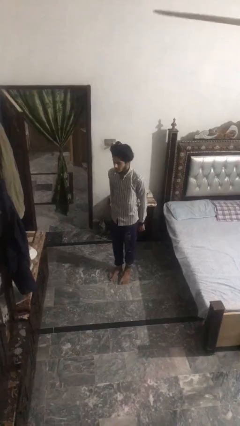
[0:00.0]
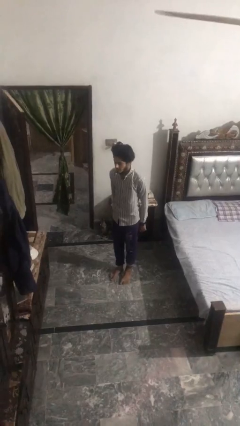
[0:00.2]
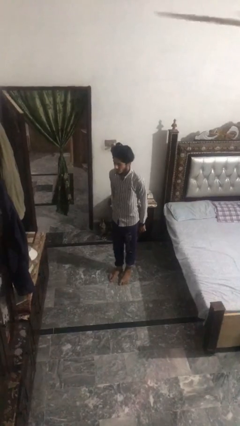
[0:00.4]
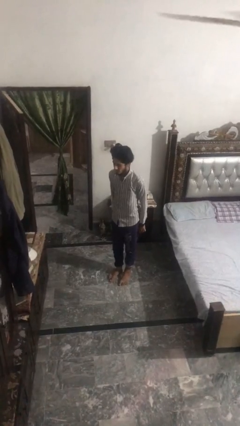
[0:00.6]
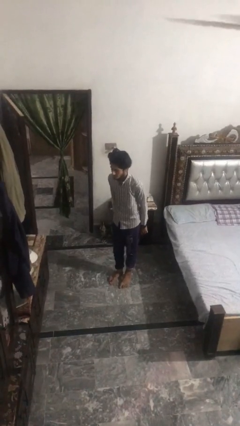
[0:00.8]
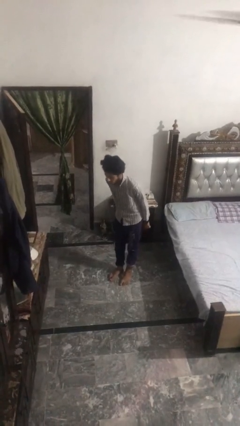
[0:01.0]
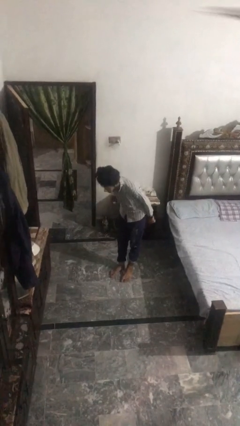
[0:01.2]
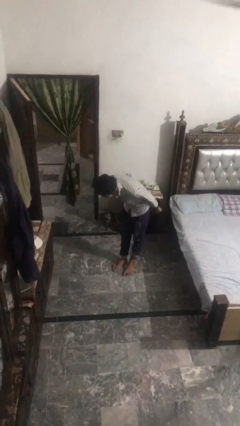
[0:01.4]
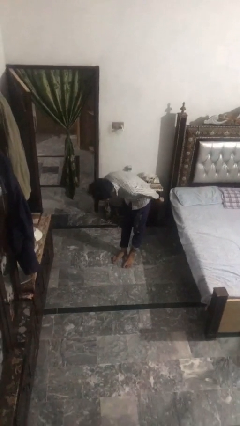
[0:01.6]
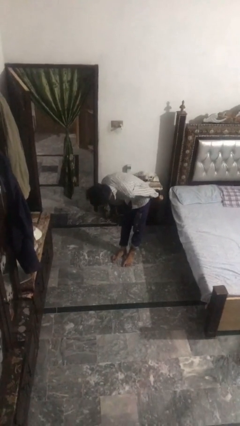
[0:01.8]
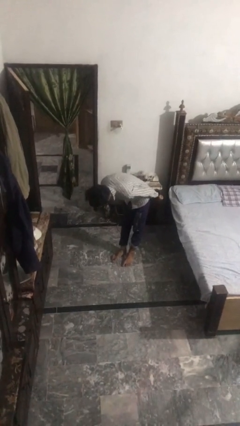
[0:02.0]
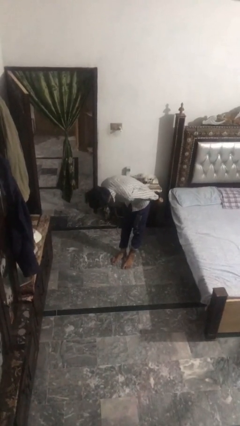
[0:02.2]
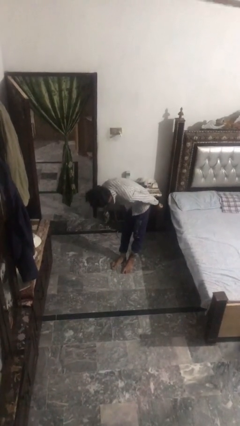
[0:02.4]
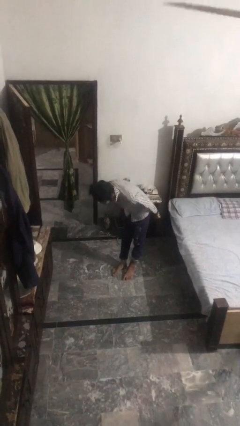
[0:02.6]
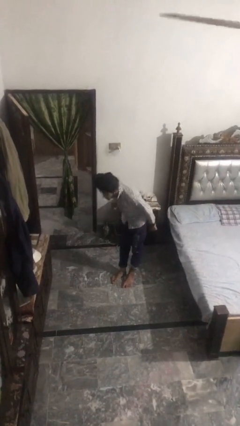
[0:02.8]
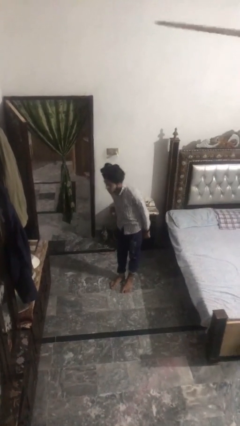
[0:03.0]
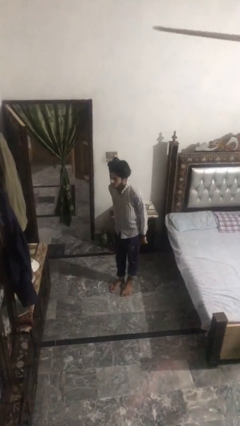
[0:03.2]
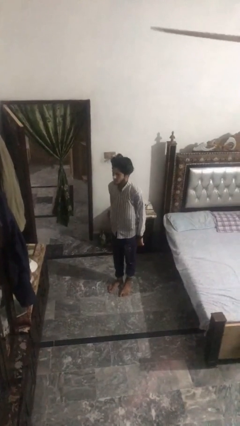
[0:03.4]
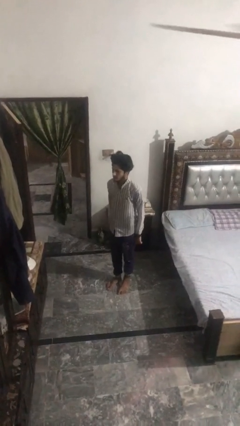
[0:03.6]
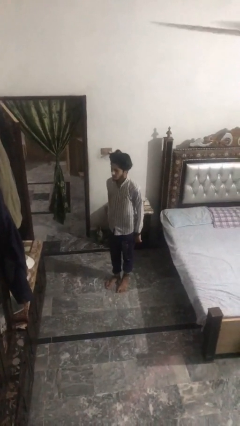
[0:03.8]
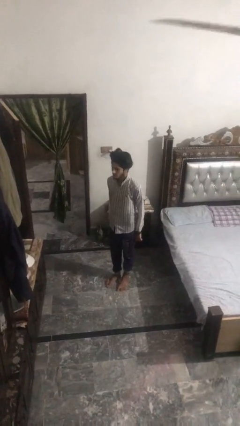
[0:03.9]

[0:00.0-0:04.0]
person bows

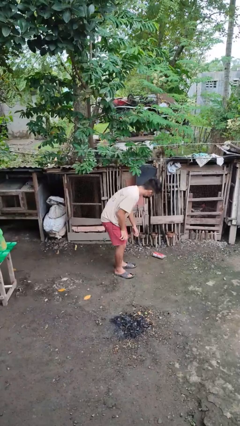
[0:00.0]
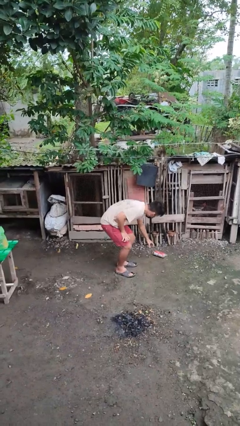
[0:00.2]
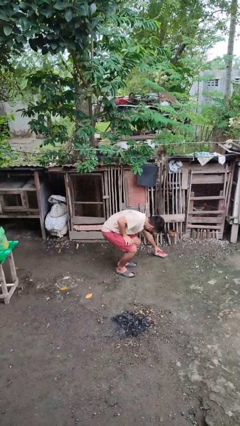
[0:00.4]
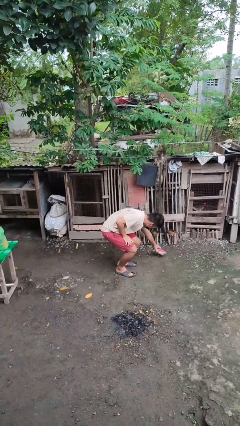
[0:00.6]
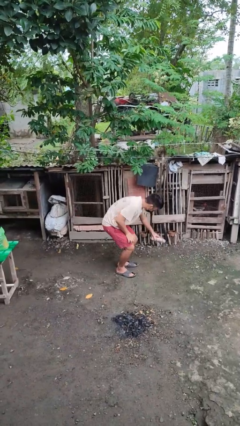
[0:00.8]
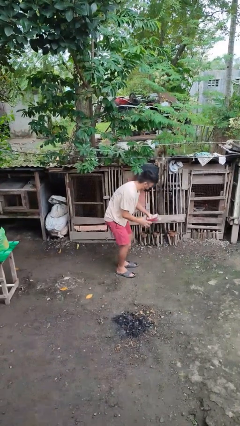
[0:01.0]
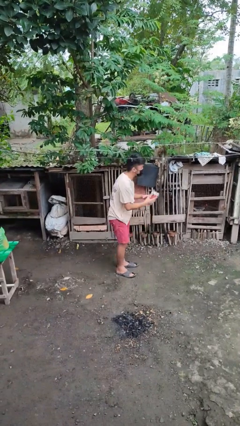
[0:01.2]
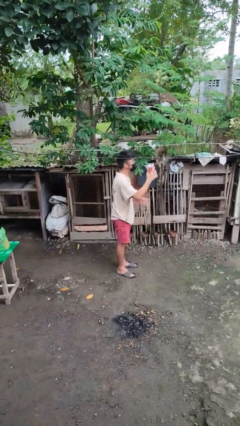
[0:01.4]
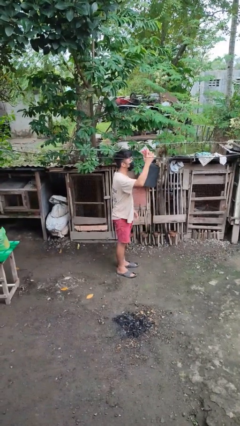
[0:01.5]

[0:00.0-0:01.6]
person picks up object from floor

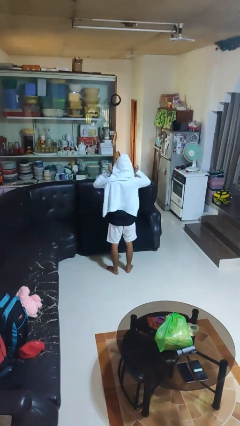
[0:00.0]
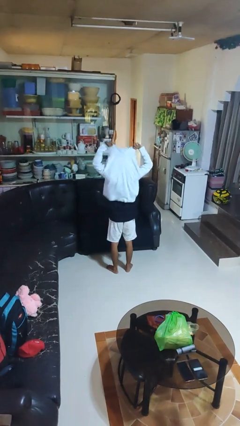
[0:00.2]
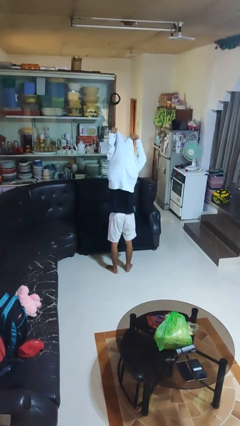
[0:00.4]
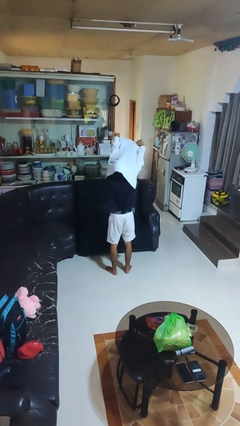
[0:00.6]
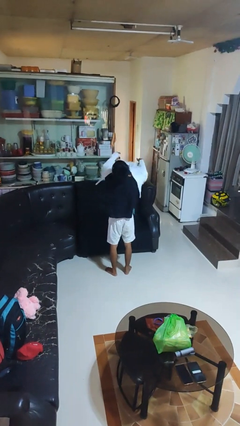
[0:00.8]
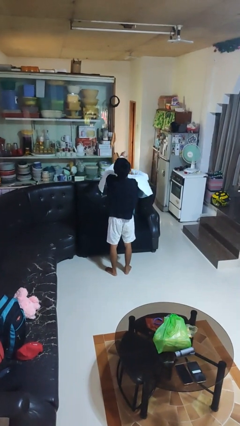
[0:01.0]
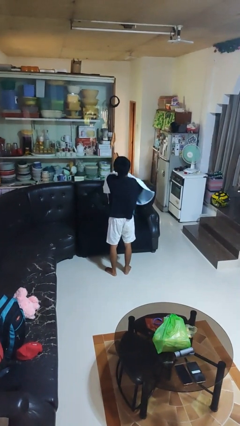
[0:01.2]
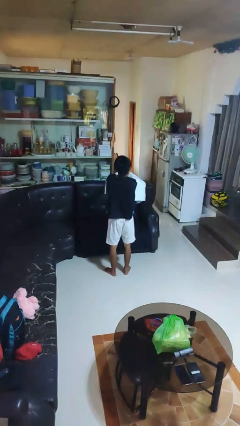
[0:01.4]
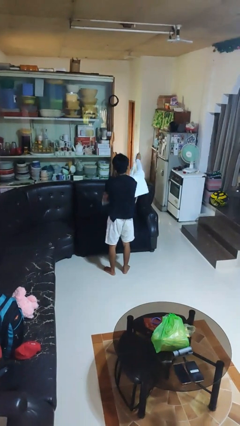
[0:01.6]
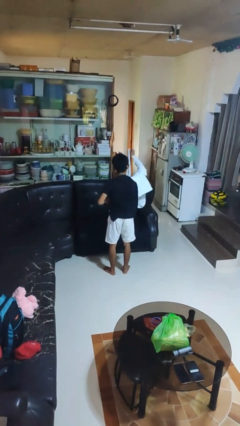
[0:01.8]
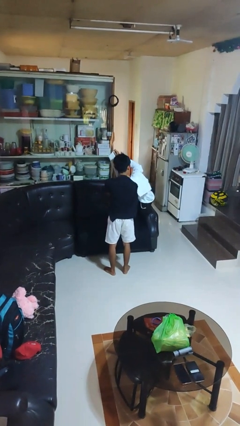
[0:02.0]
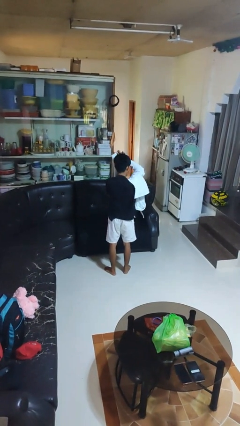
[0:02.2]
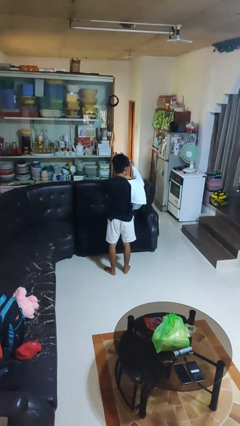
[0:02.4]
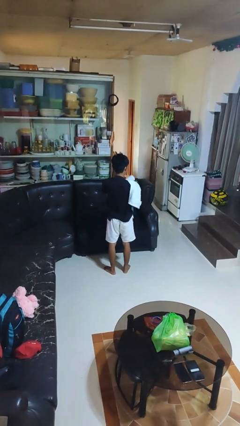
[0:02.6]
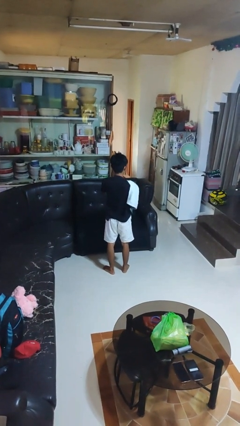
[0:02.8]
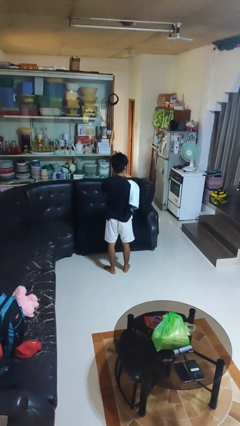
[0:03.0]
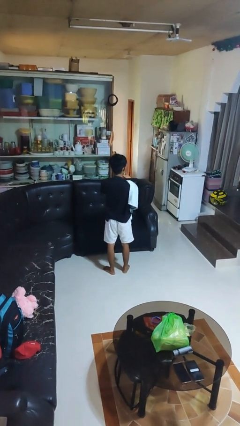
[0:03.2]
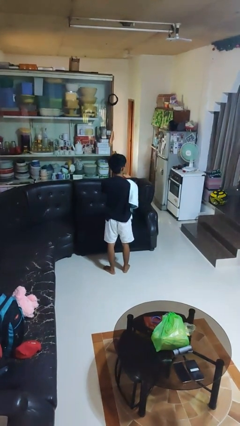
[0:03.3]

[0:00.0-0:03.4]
person takes off hoodie

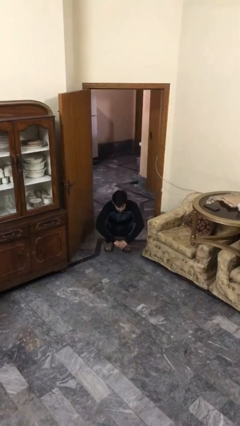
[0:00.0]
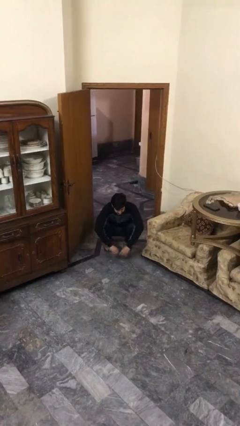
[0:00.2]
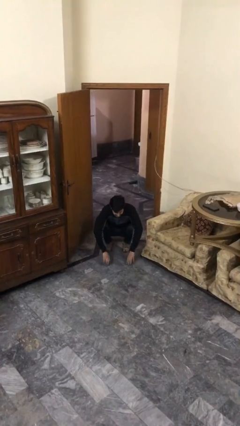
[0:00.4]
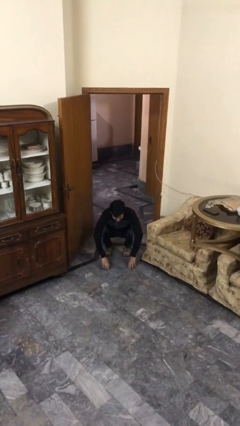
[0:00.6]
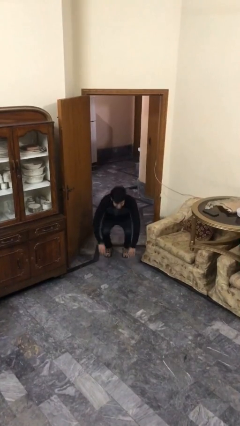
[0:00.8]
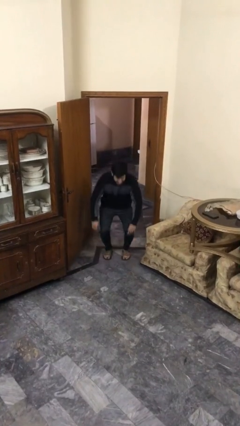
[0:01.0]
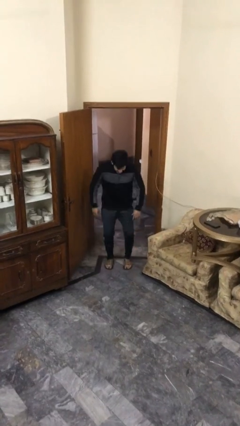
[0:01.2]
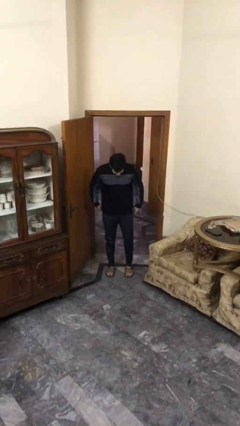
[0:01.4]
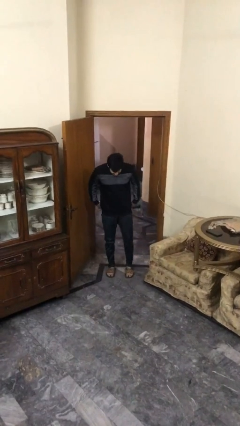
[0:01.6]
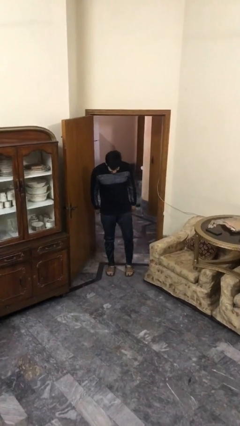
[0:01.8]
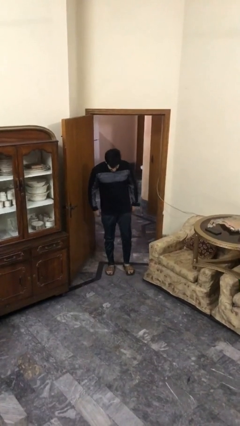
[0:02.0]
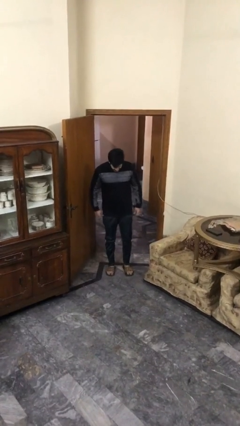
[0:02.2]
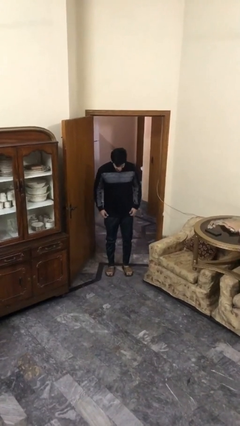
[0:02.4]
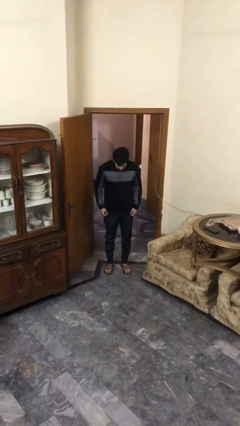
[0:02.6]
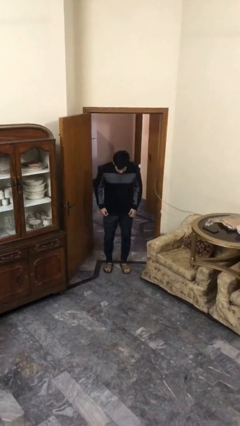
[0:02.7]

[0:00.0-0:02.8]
person stands up

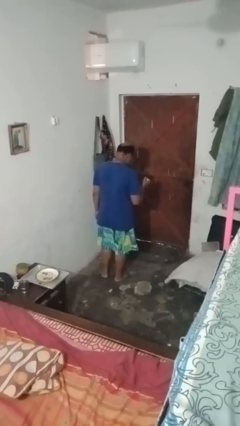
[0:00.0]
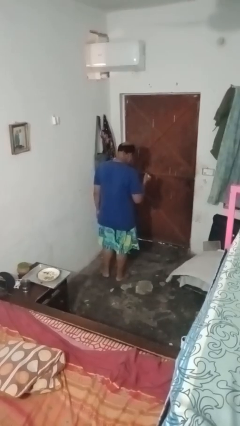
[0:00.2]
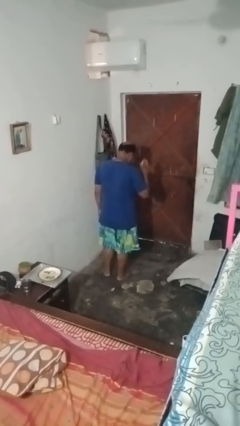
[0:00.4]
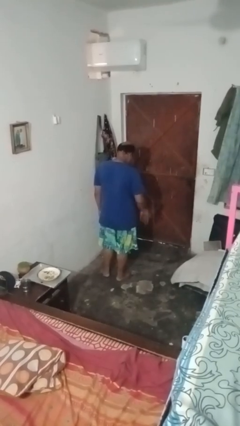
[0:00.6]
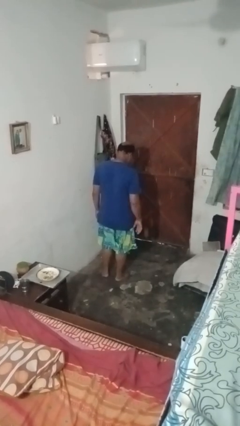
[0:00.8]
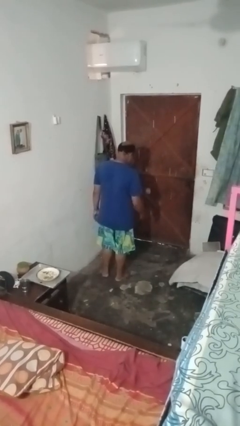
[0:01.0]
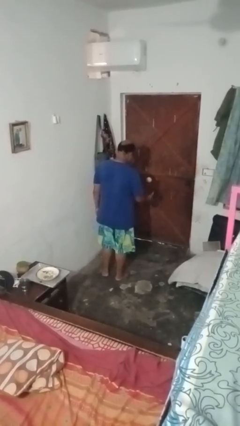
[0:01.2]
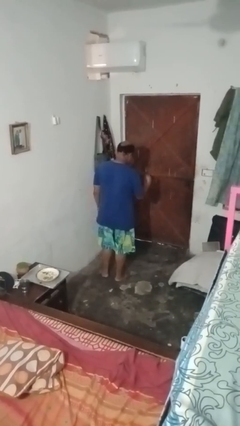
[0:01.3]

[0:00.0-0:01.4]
person bounces ball on floor

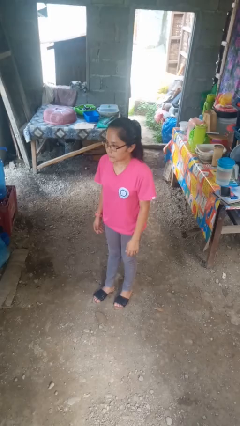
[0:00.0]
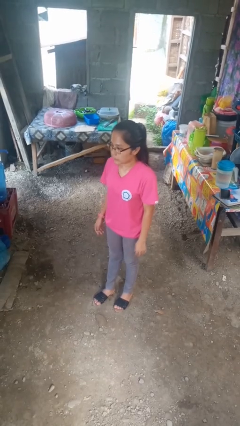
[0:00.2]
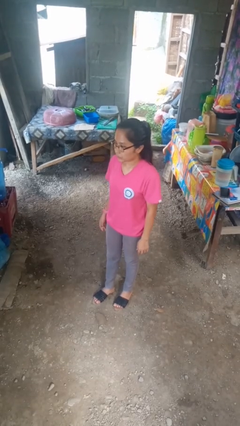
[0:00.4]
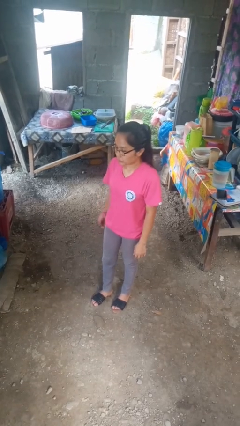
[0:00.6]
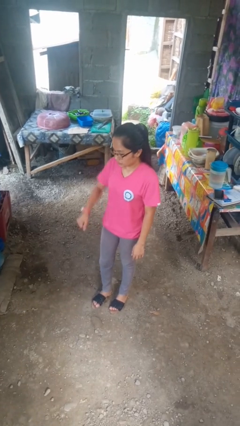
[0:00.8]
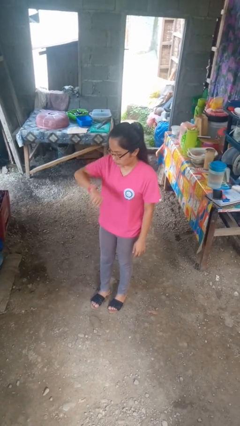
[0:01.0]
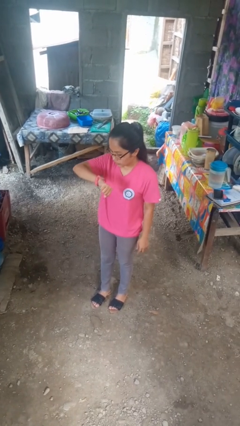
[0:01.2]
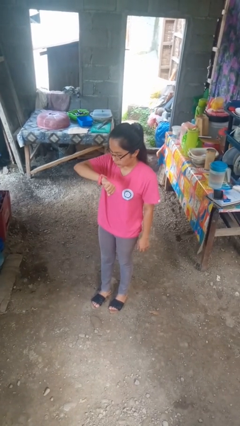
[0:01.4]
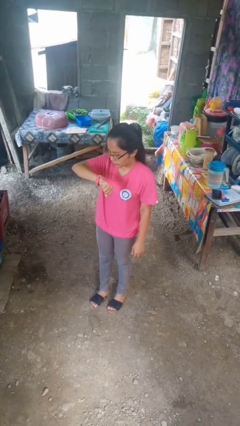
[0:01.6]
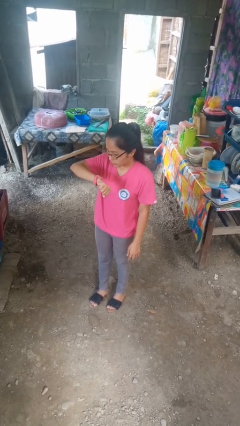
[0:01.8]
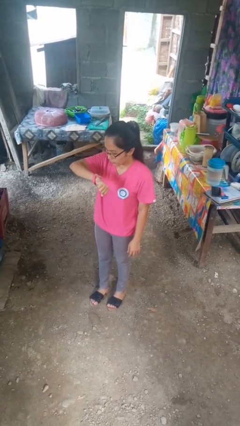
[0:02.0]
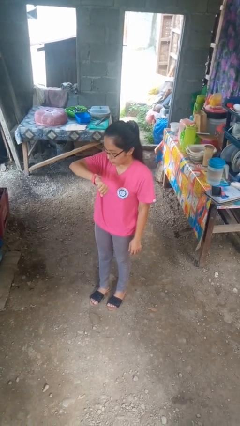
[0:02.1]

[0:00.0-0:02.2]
person looks at wristwatch

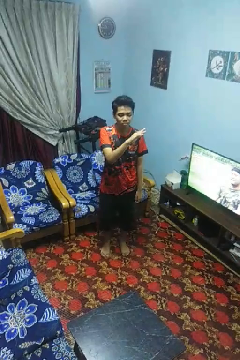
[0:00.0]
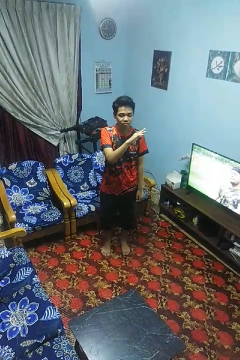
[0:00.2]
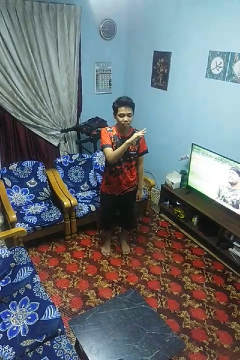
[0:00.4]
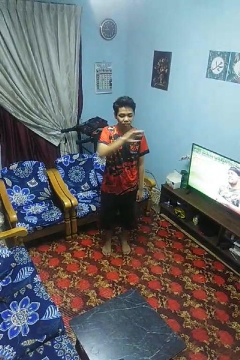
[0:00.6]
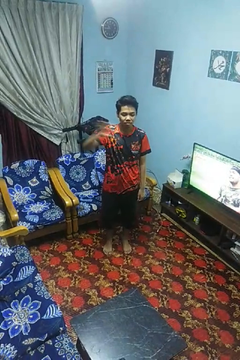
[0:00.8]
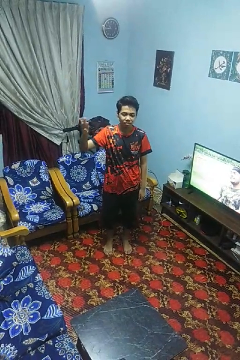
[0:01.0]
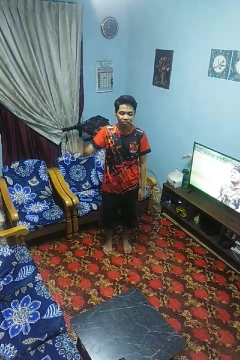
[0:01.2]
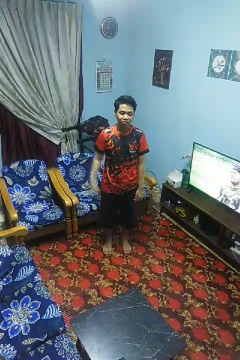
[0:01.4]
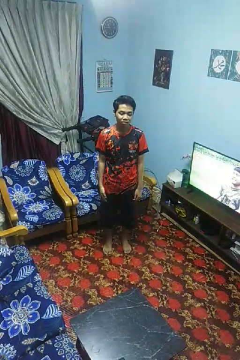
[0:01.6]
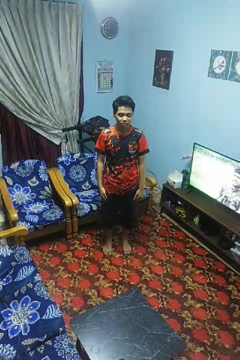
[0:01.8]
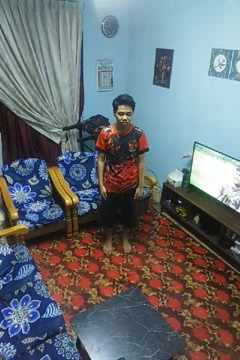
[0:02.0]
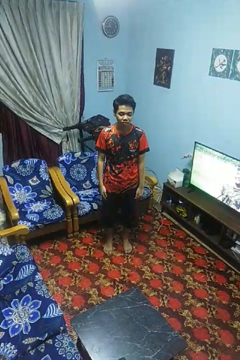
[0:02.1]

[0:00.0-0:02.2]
person gestures swipe right
